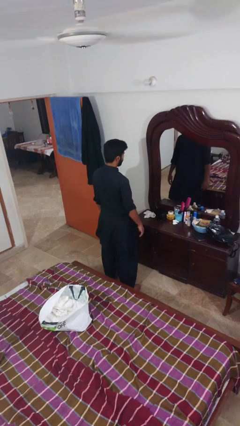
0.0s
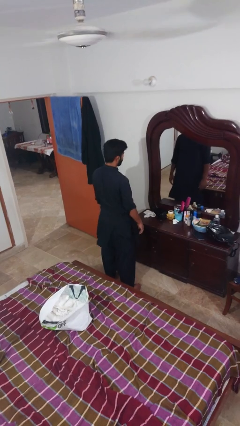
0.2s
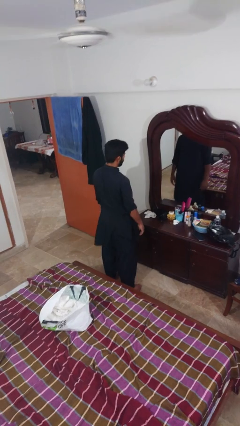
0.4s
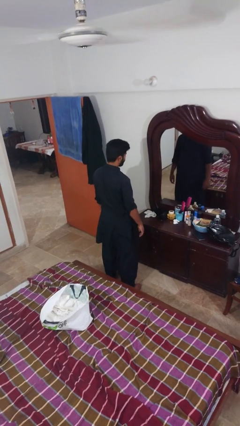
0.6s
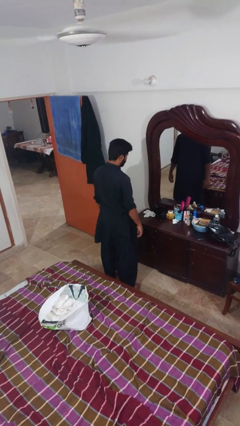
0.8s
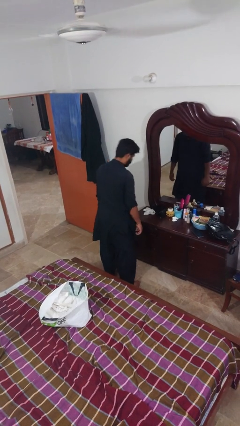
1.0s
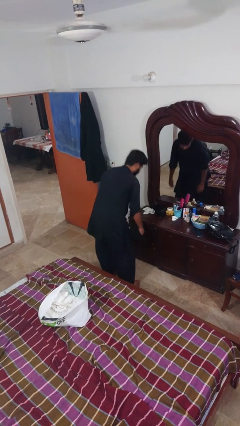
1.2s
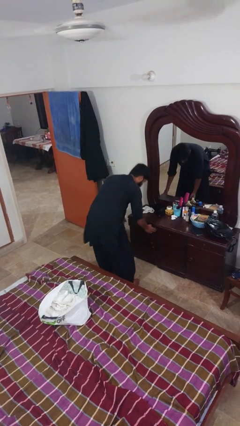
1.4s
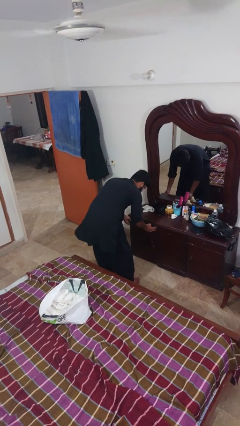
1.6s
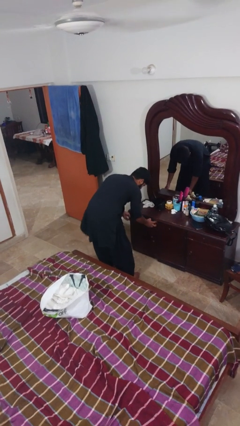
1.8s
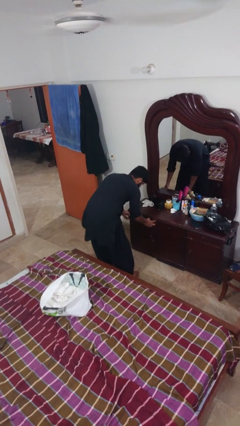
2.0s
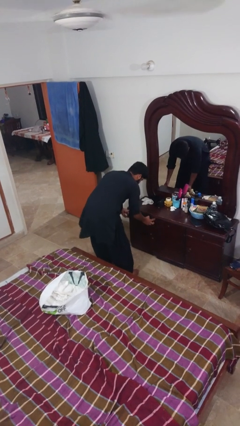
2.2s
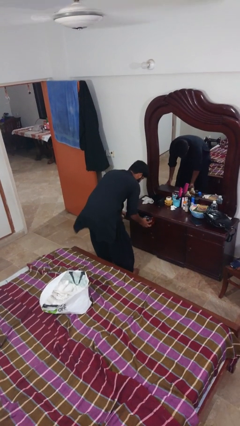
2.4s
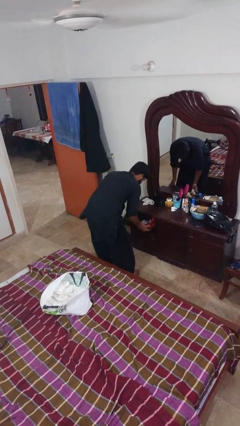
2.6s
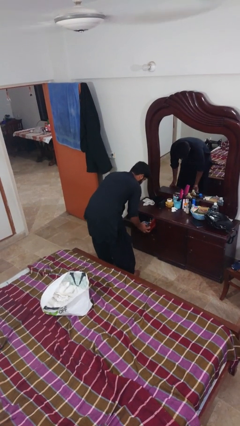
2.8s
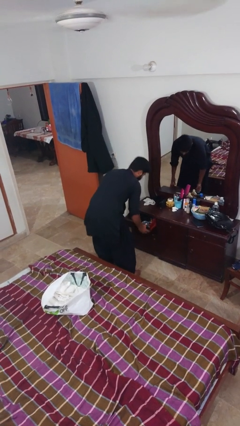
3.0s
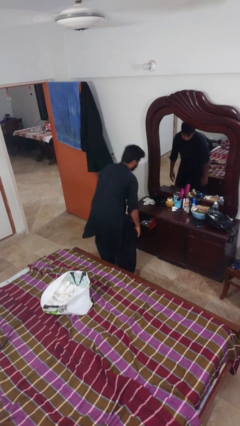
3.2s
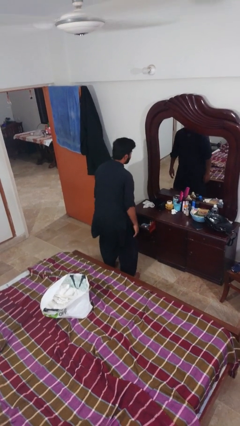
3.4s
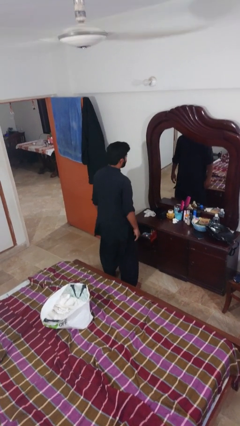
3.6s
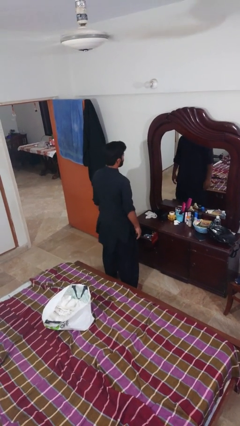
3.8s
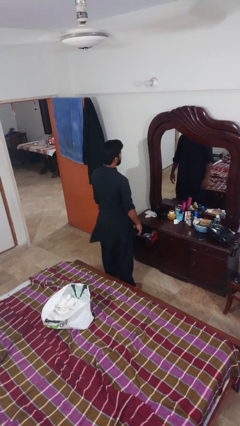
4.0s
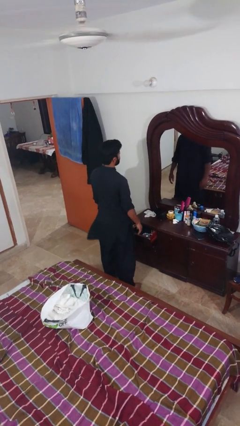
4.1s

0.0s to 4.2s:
person opens dresser drawer

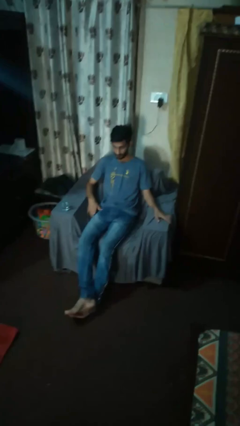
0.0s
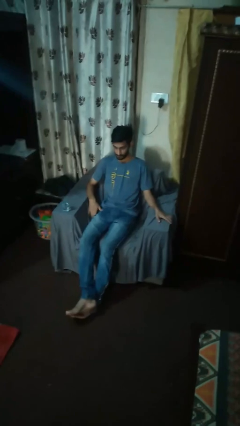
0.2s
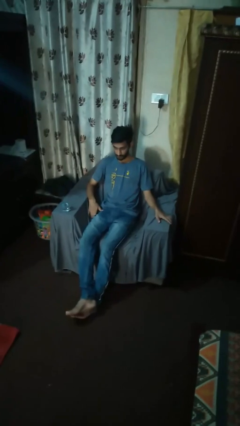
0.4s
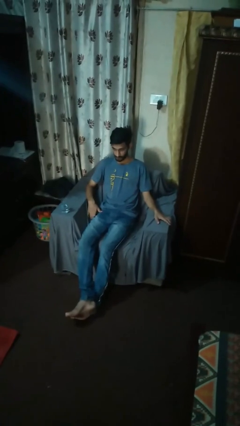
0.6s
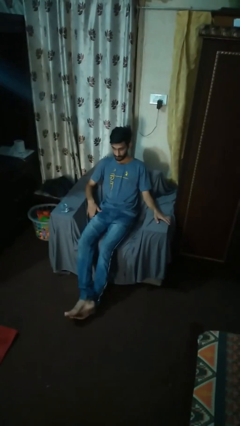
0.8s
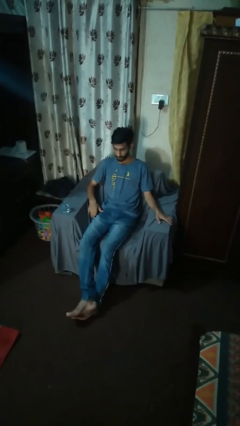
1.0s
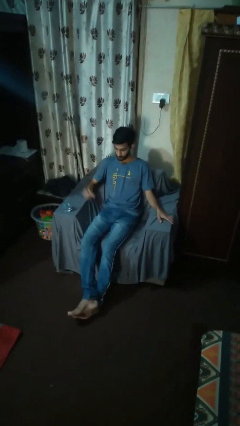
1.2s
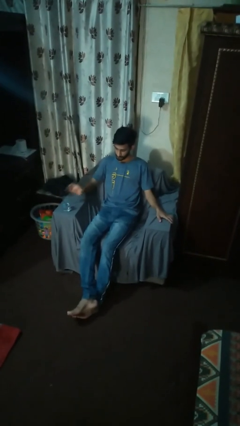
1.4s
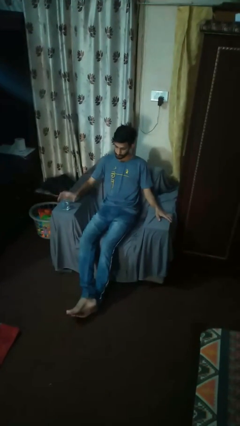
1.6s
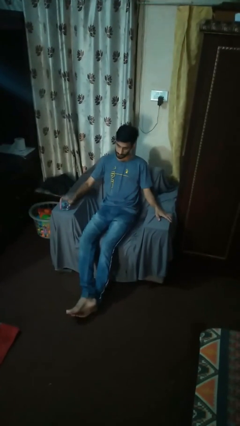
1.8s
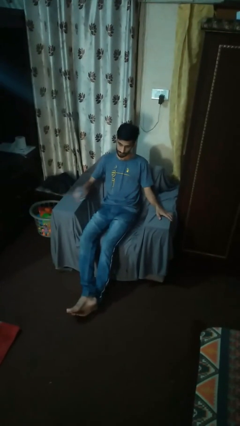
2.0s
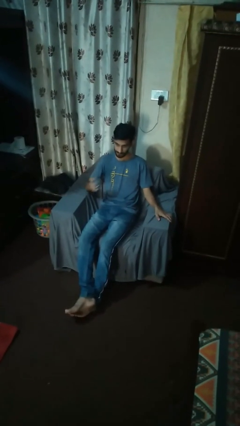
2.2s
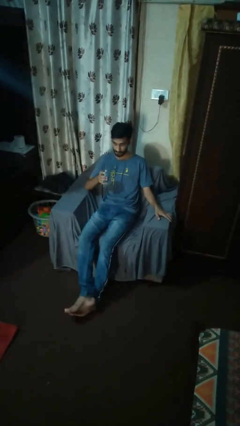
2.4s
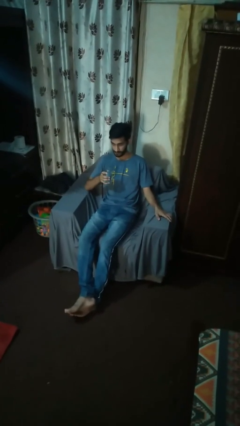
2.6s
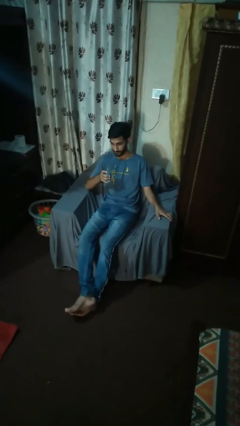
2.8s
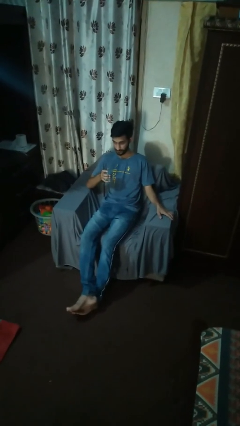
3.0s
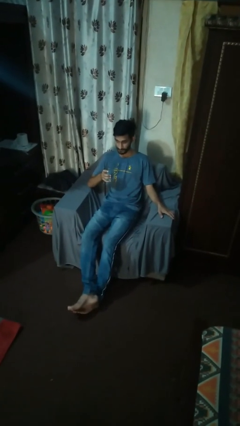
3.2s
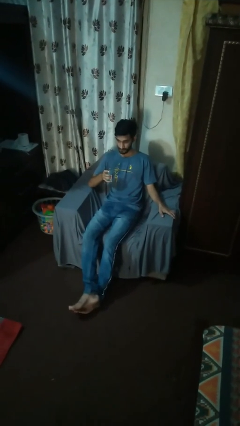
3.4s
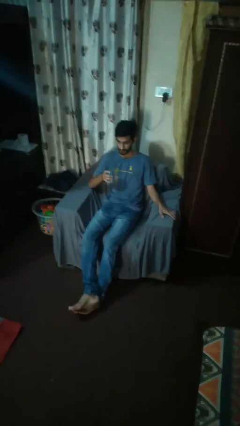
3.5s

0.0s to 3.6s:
person picks up object from table

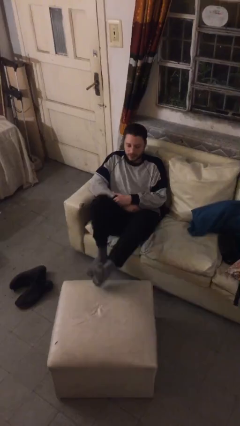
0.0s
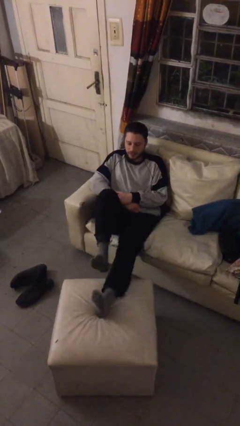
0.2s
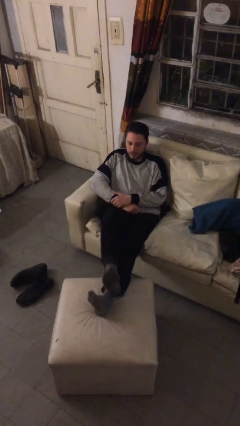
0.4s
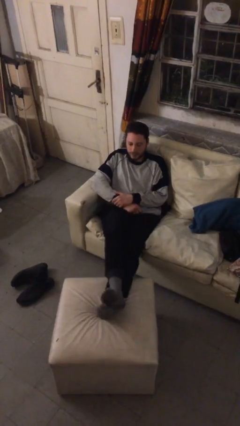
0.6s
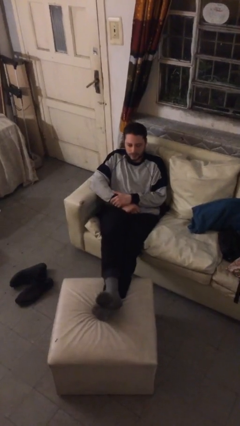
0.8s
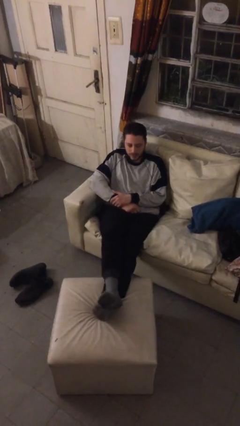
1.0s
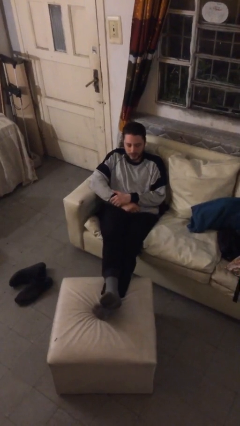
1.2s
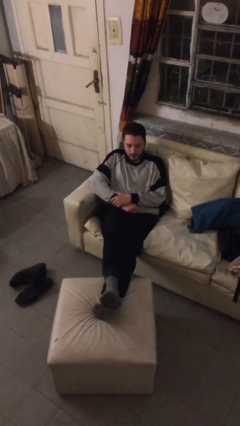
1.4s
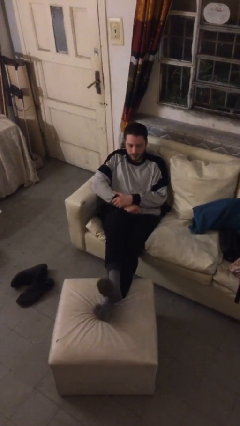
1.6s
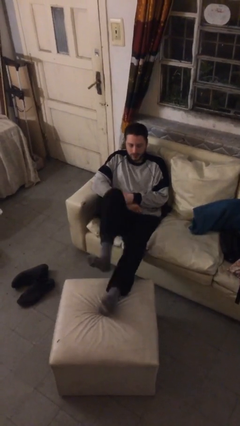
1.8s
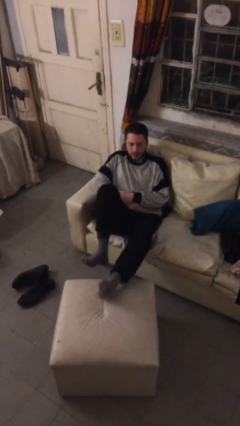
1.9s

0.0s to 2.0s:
person puts feet up

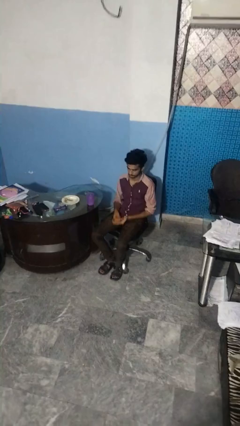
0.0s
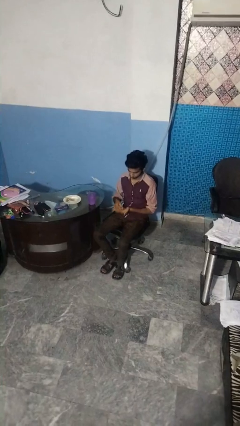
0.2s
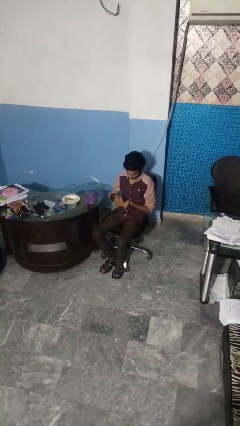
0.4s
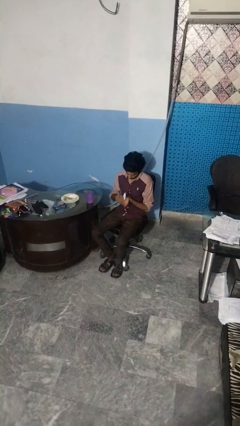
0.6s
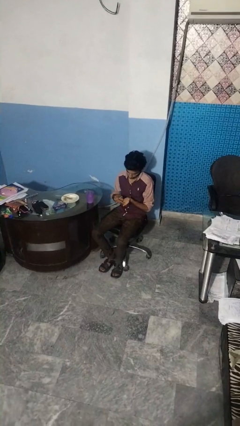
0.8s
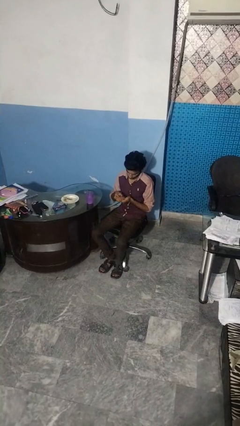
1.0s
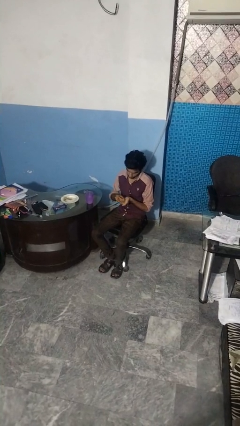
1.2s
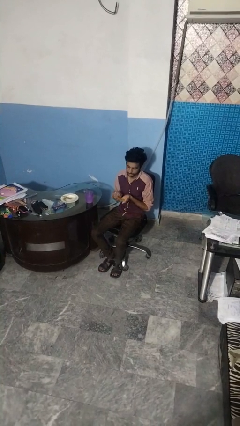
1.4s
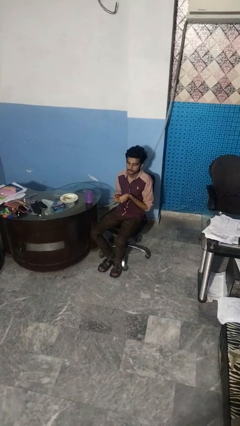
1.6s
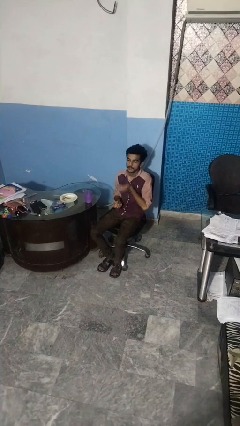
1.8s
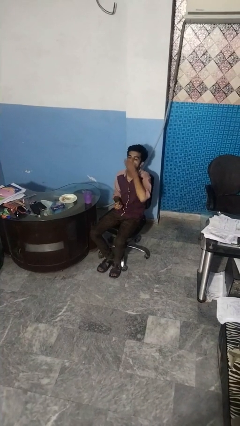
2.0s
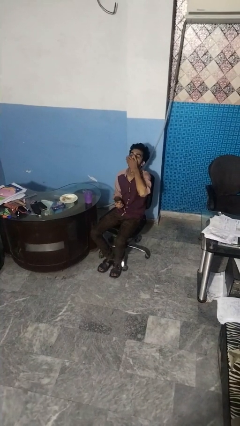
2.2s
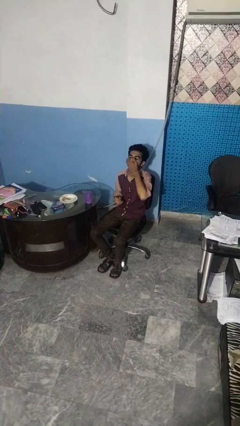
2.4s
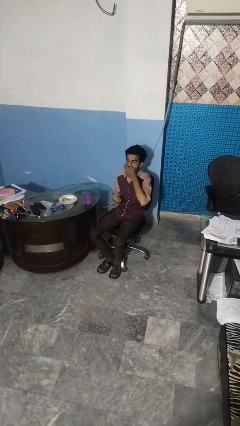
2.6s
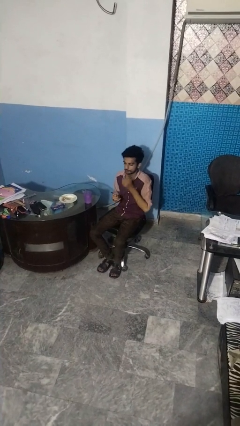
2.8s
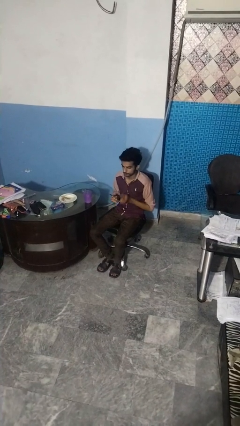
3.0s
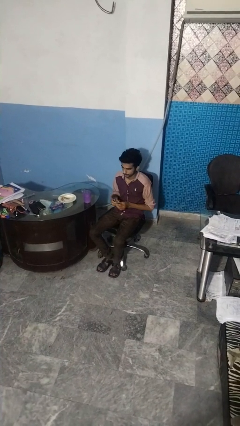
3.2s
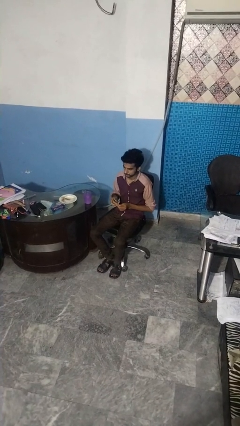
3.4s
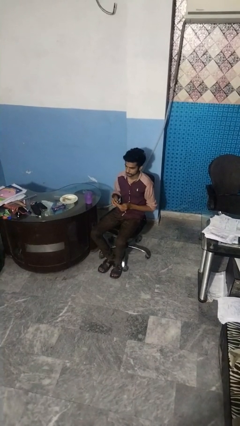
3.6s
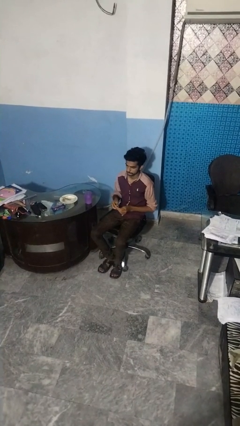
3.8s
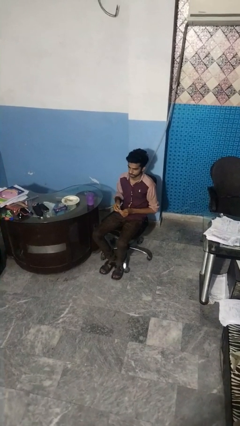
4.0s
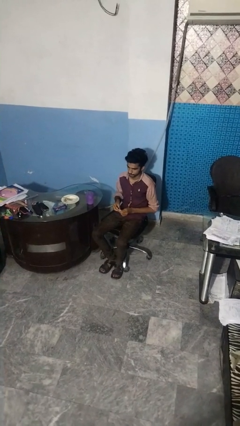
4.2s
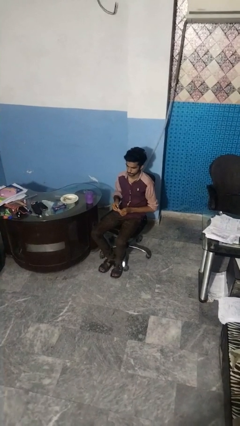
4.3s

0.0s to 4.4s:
person takes medicine pills

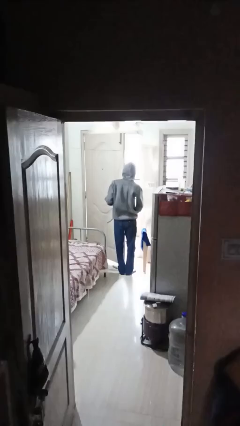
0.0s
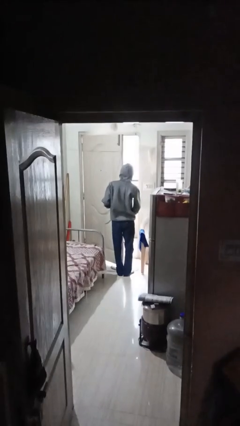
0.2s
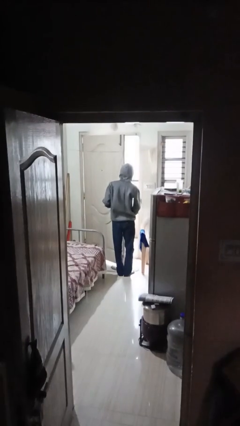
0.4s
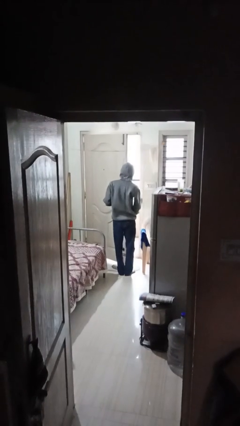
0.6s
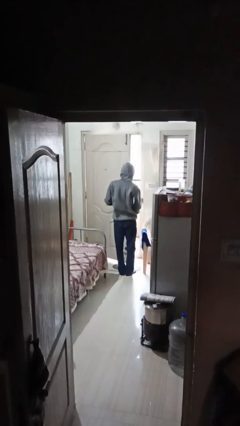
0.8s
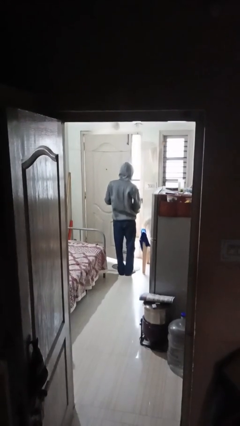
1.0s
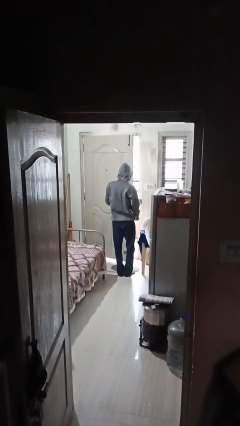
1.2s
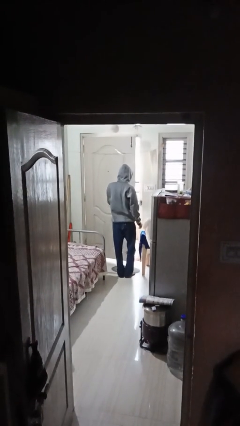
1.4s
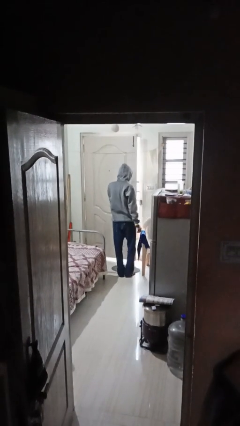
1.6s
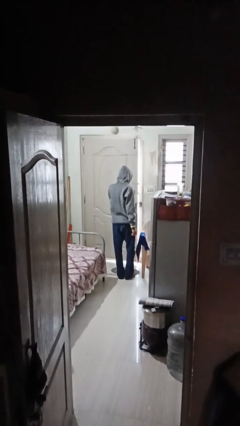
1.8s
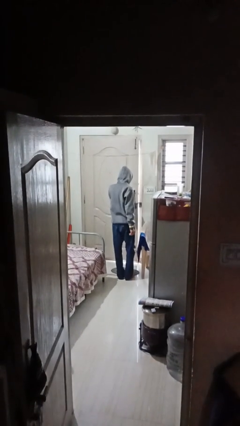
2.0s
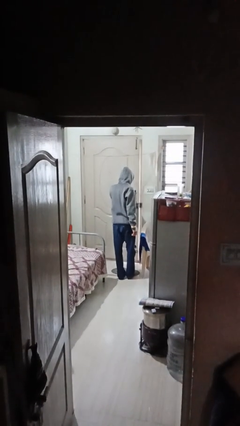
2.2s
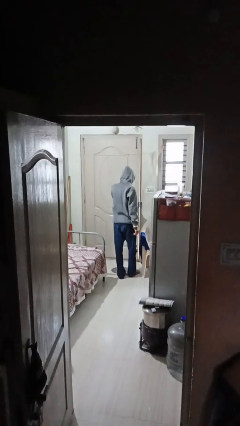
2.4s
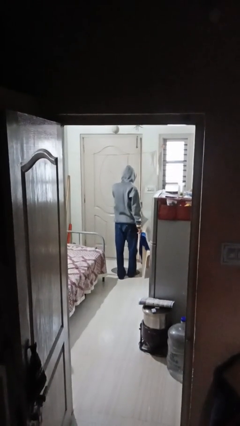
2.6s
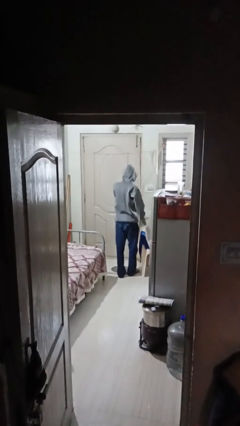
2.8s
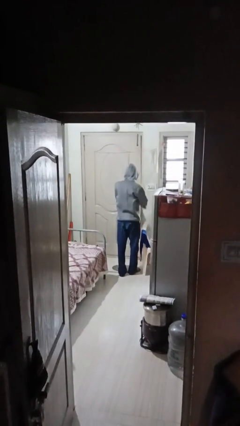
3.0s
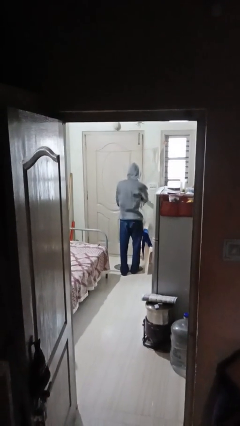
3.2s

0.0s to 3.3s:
person closes facility door
